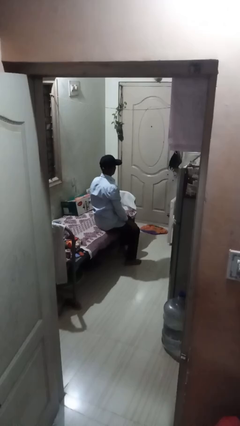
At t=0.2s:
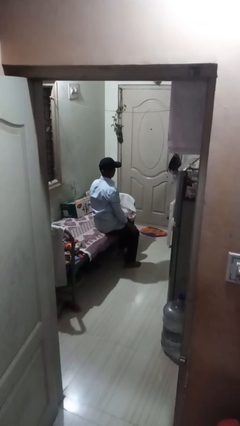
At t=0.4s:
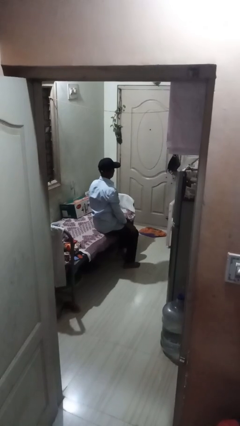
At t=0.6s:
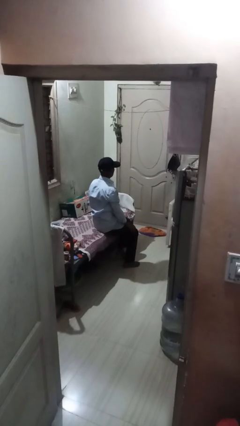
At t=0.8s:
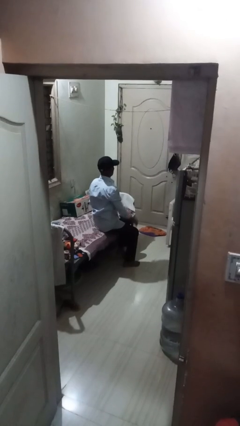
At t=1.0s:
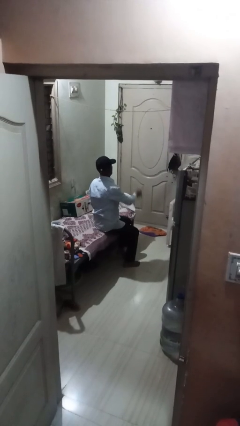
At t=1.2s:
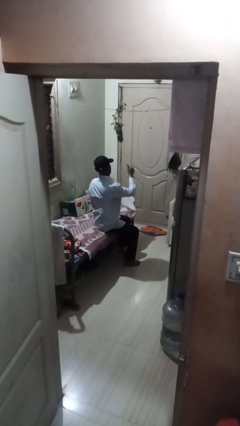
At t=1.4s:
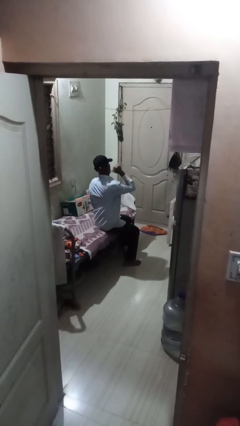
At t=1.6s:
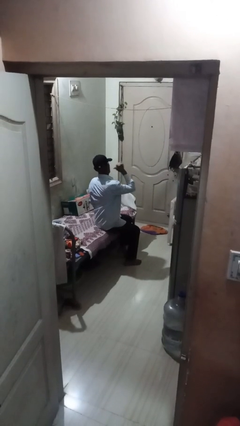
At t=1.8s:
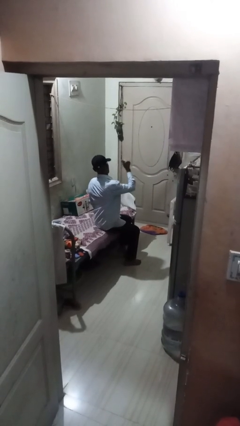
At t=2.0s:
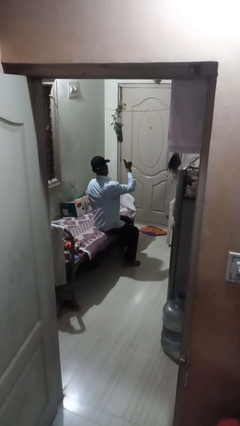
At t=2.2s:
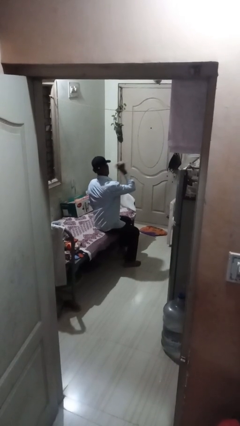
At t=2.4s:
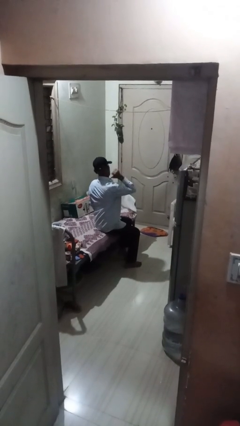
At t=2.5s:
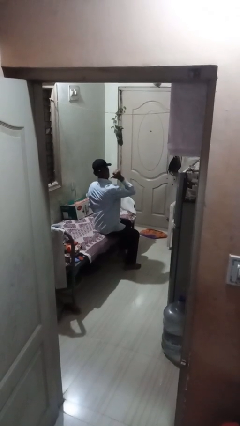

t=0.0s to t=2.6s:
person gestures behind me

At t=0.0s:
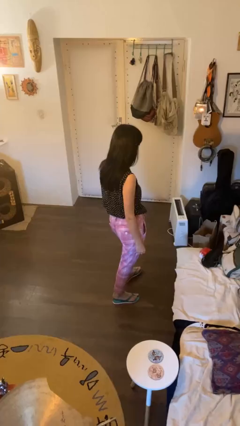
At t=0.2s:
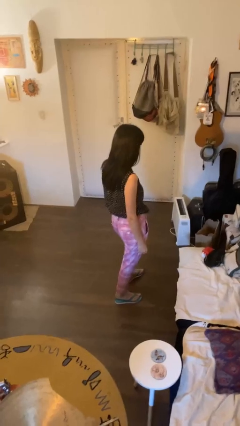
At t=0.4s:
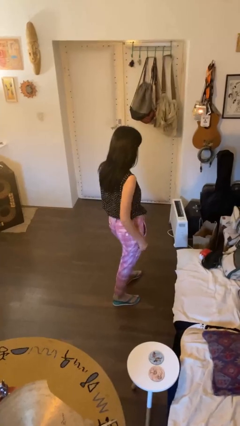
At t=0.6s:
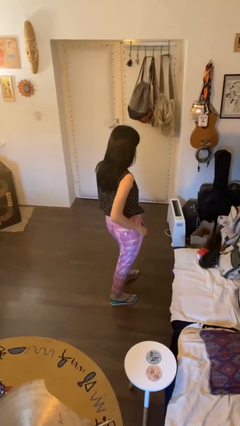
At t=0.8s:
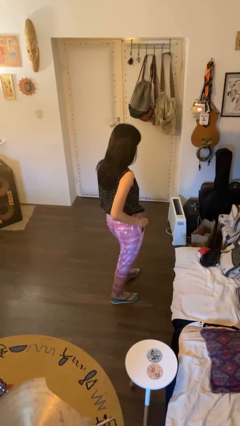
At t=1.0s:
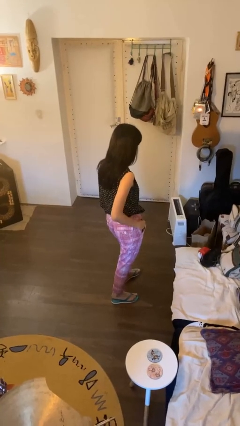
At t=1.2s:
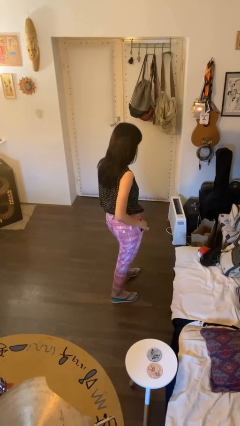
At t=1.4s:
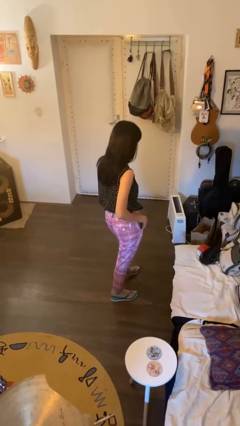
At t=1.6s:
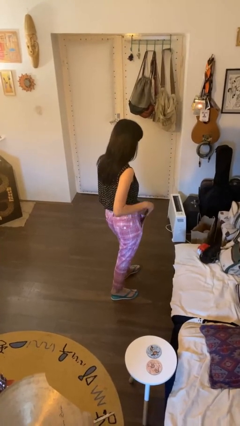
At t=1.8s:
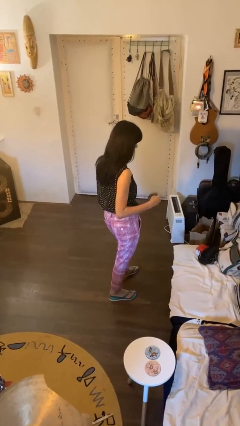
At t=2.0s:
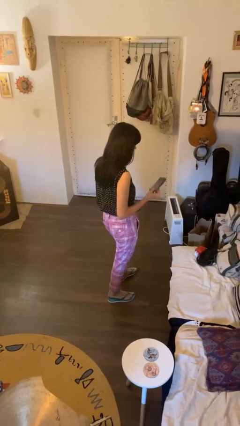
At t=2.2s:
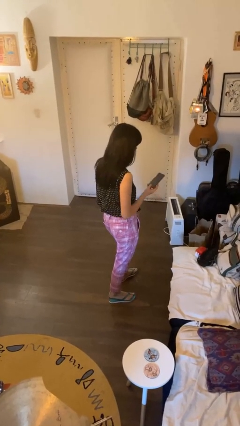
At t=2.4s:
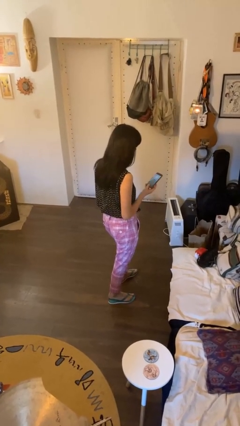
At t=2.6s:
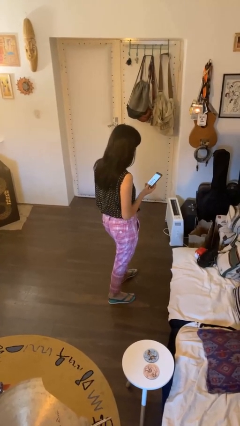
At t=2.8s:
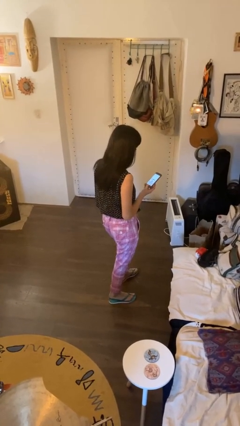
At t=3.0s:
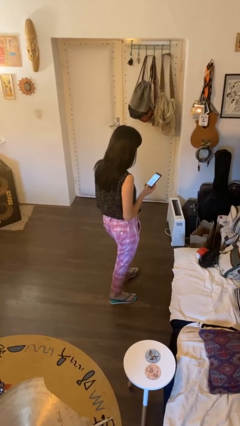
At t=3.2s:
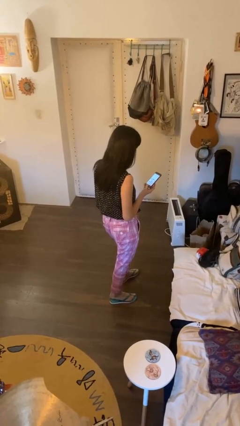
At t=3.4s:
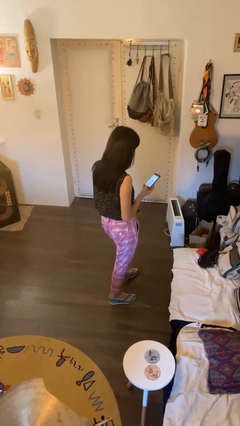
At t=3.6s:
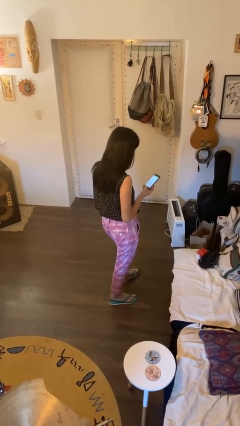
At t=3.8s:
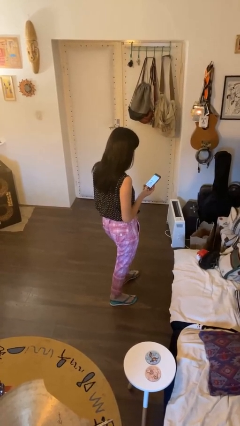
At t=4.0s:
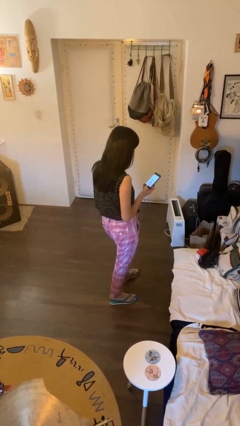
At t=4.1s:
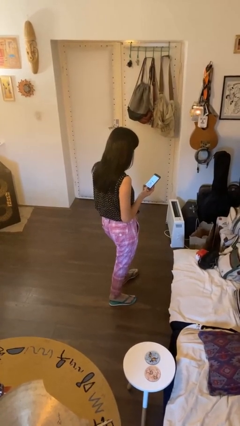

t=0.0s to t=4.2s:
person takes phone from pocket

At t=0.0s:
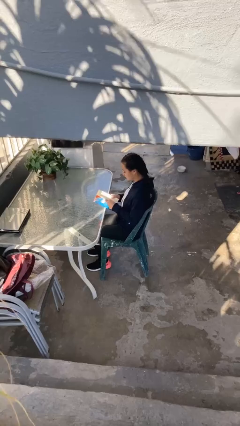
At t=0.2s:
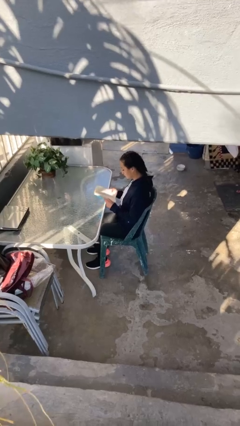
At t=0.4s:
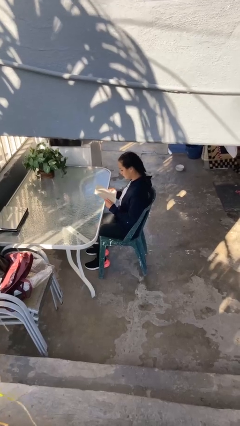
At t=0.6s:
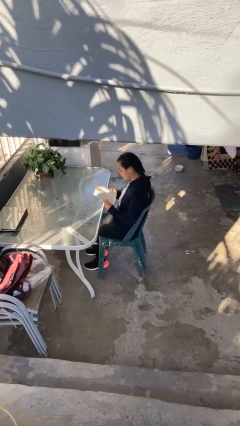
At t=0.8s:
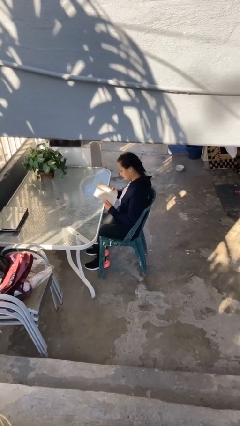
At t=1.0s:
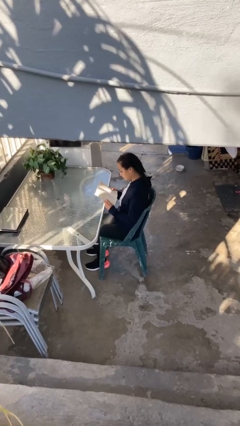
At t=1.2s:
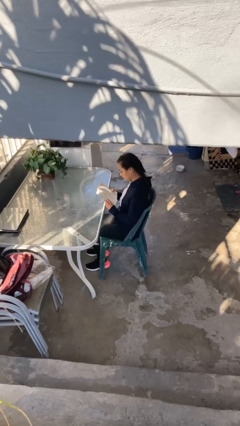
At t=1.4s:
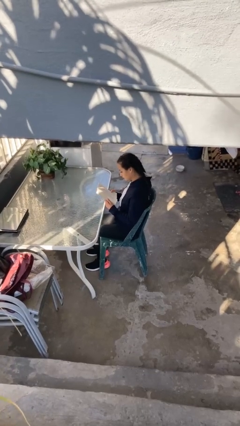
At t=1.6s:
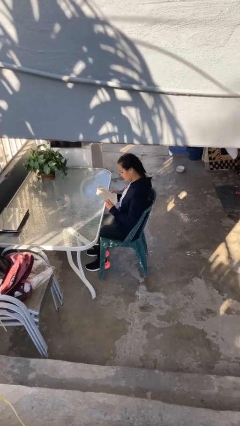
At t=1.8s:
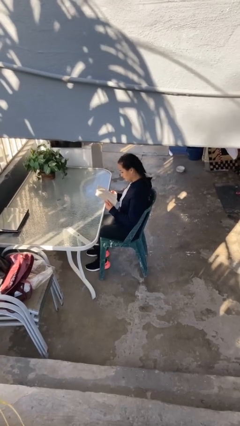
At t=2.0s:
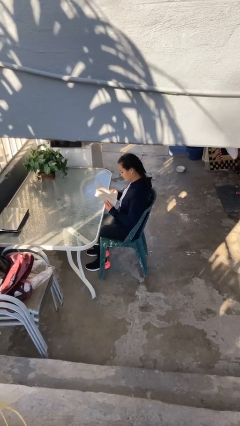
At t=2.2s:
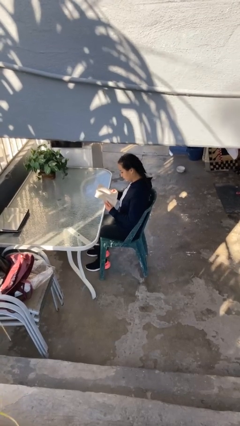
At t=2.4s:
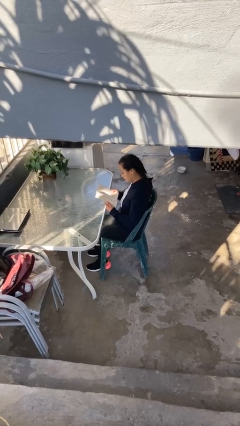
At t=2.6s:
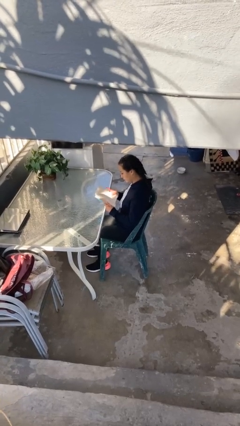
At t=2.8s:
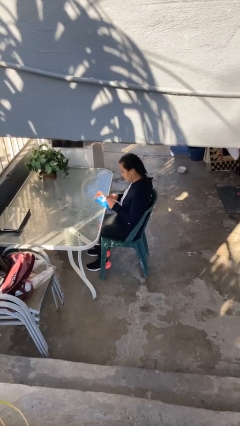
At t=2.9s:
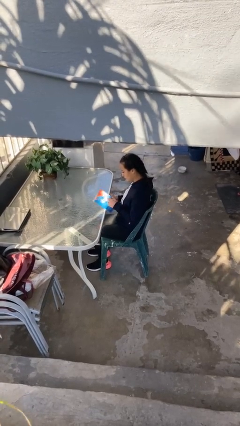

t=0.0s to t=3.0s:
person reads document

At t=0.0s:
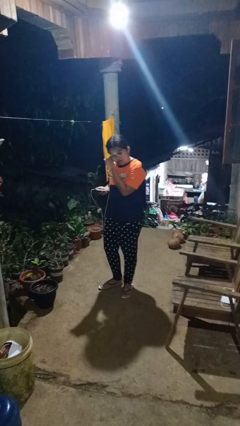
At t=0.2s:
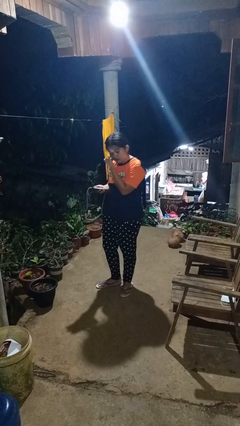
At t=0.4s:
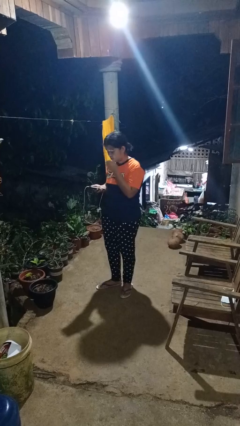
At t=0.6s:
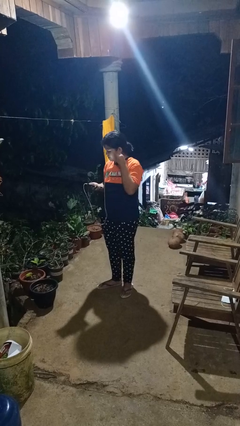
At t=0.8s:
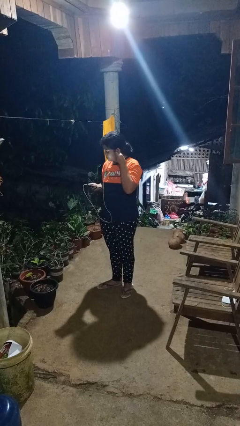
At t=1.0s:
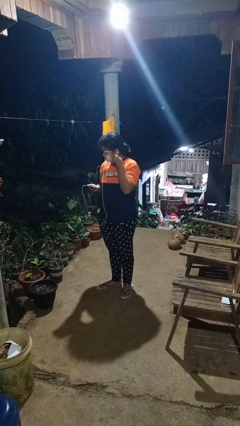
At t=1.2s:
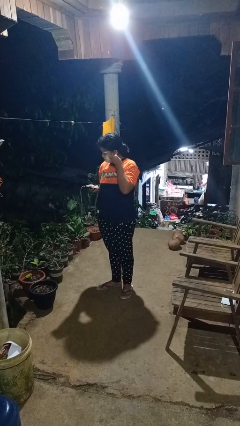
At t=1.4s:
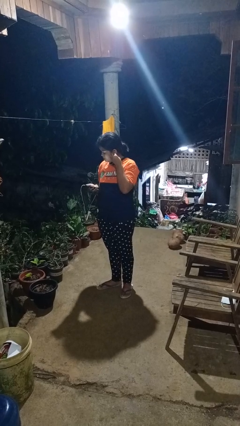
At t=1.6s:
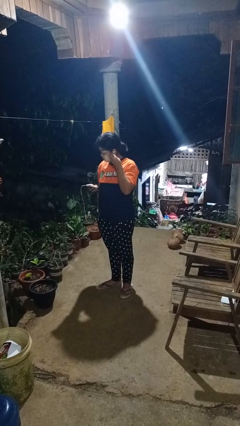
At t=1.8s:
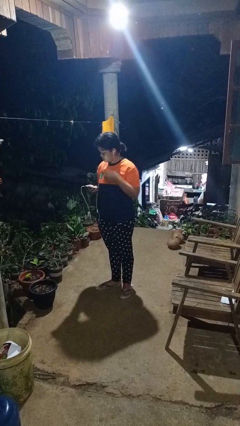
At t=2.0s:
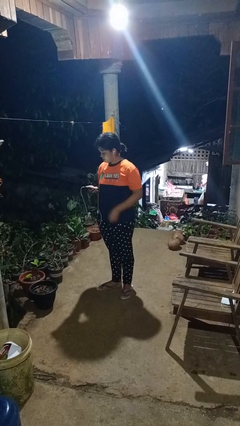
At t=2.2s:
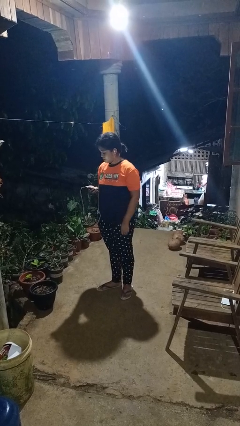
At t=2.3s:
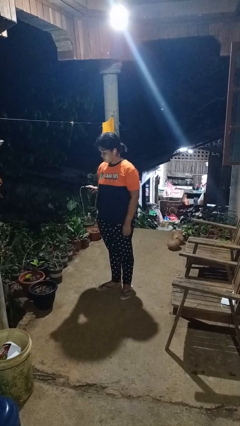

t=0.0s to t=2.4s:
person puts on headphones

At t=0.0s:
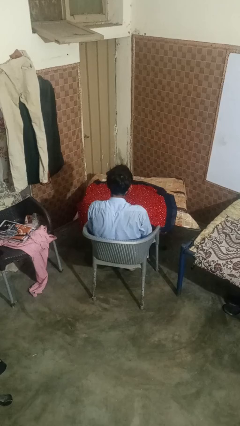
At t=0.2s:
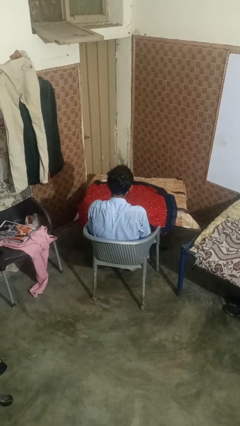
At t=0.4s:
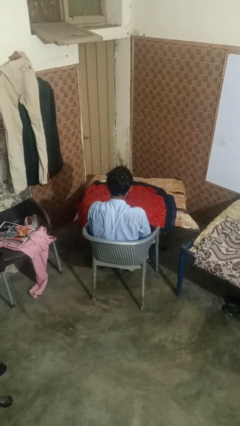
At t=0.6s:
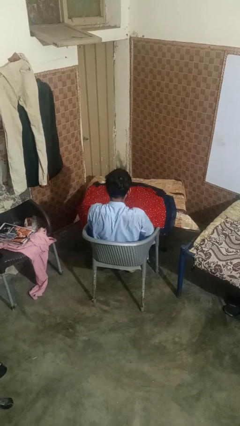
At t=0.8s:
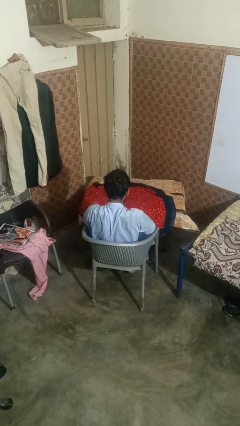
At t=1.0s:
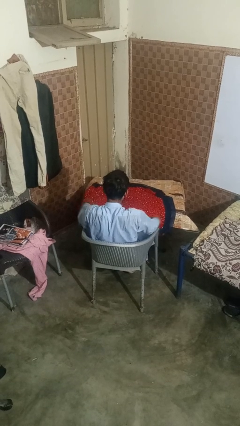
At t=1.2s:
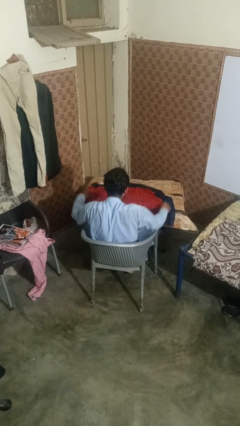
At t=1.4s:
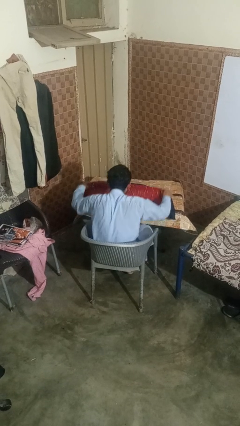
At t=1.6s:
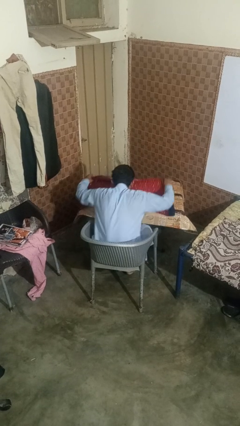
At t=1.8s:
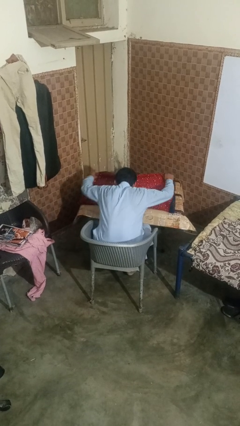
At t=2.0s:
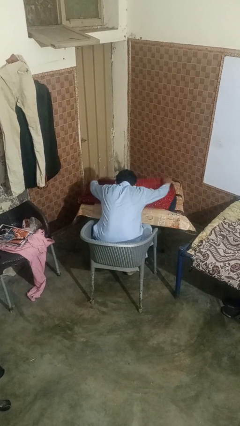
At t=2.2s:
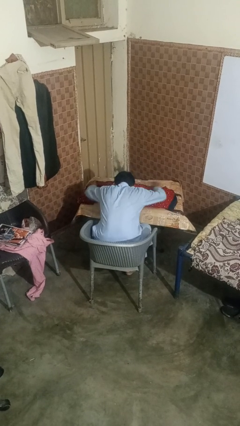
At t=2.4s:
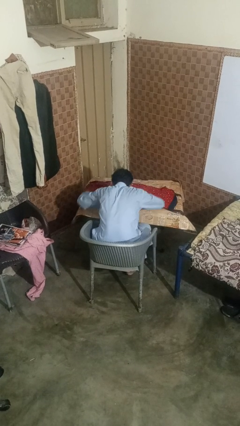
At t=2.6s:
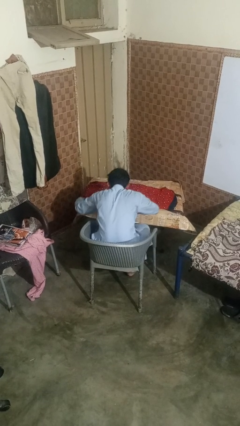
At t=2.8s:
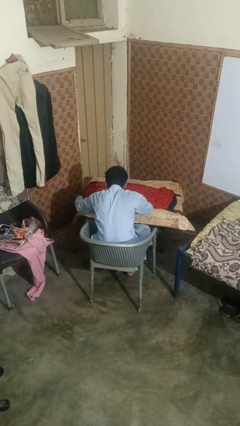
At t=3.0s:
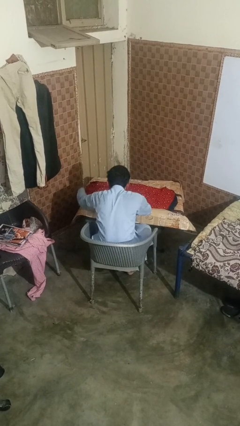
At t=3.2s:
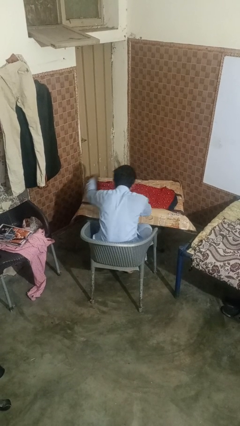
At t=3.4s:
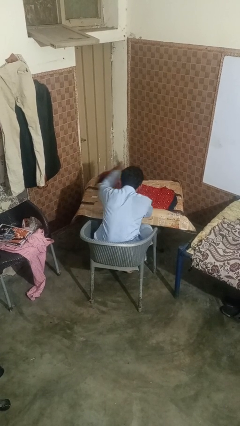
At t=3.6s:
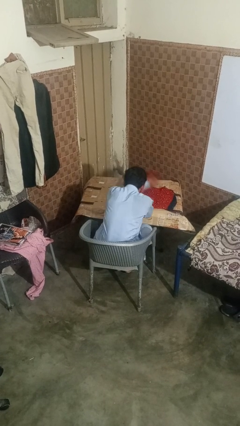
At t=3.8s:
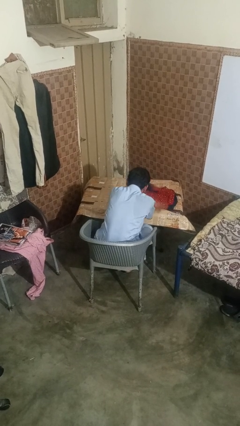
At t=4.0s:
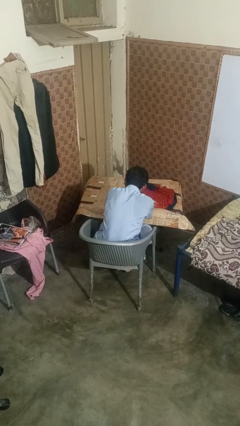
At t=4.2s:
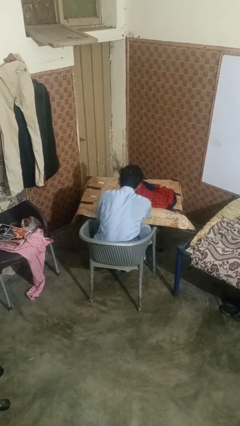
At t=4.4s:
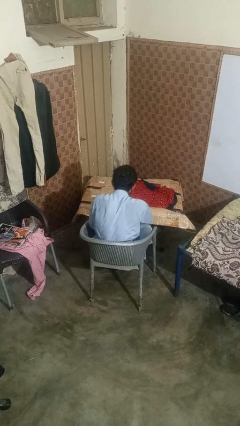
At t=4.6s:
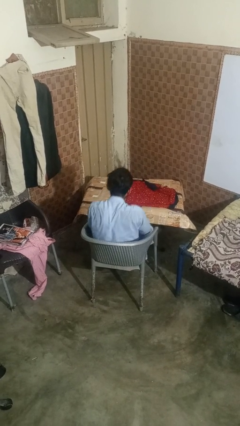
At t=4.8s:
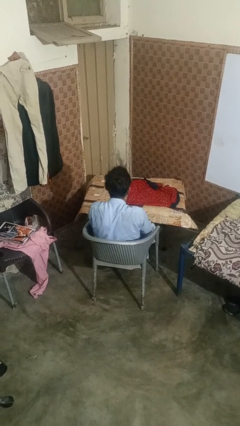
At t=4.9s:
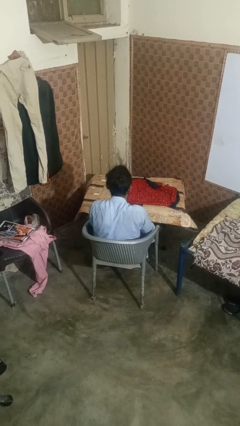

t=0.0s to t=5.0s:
person folds tablecloth

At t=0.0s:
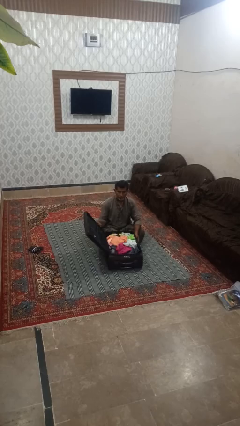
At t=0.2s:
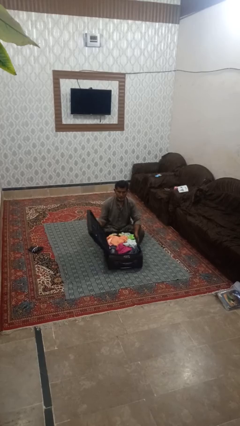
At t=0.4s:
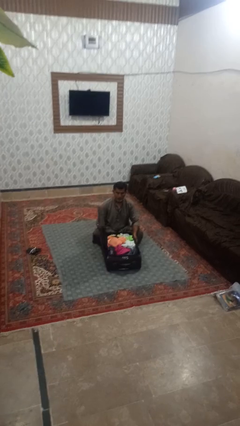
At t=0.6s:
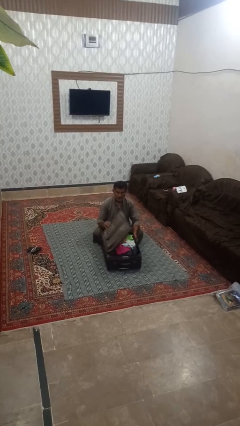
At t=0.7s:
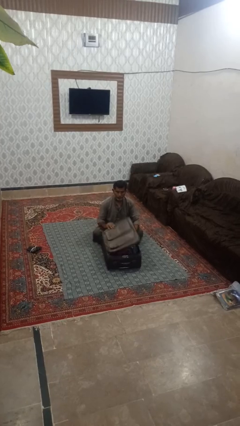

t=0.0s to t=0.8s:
person closes suitcase
